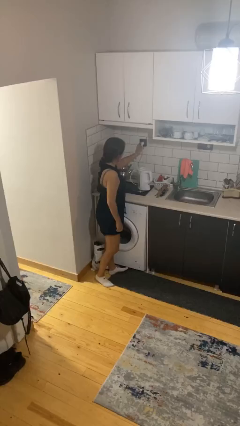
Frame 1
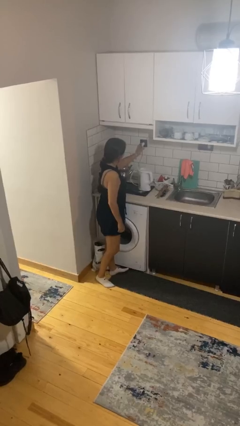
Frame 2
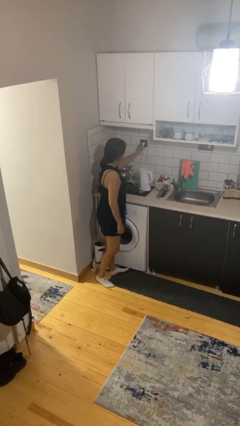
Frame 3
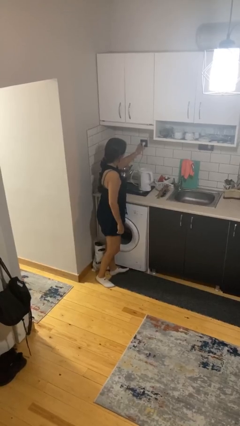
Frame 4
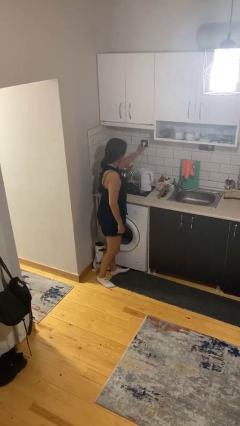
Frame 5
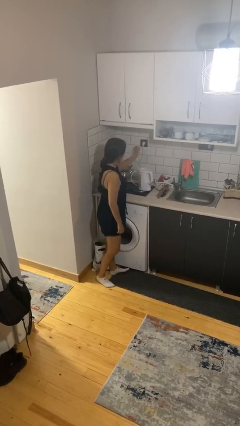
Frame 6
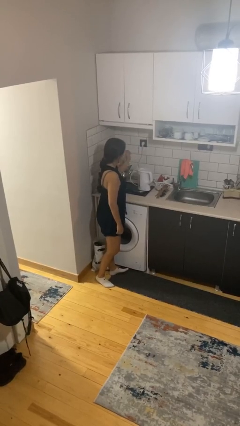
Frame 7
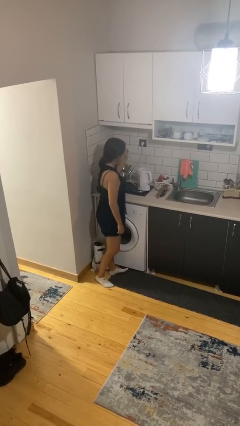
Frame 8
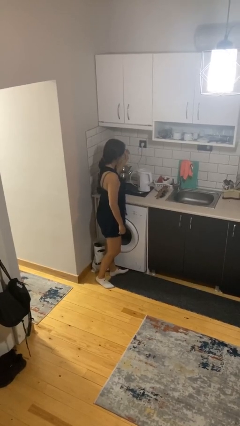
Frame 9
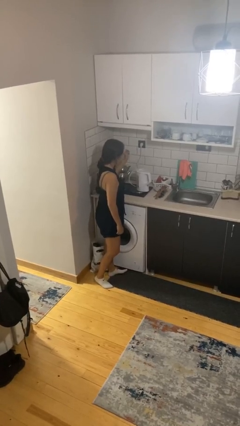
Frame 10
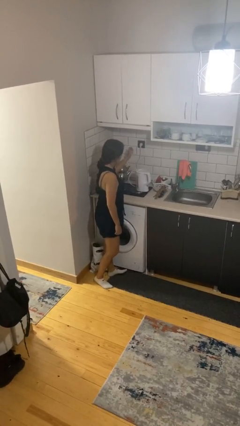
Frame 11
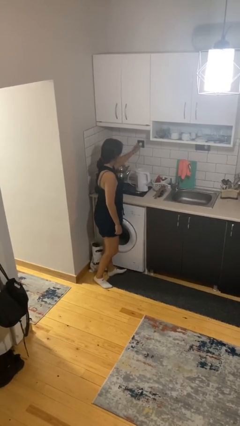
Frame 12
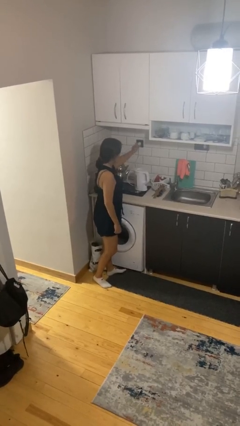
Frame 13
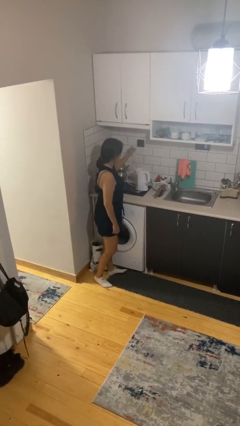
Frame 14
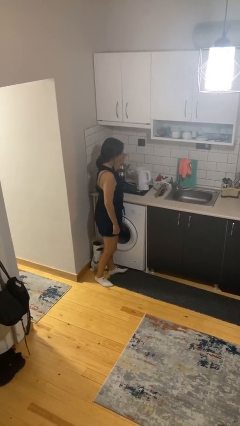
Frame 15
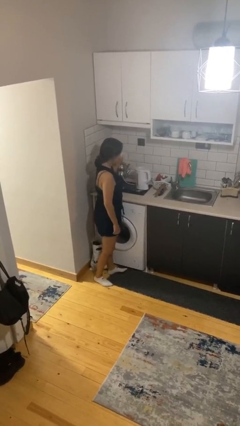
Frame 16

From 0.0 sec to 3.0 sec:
person unplugs from electrical socket

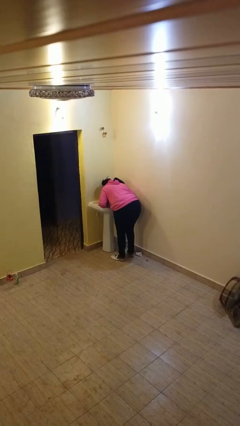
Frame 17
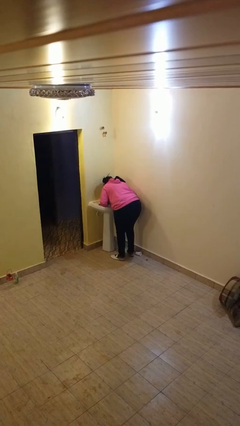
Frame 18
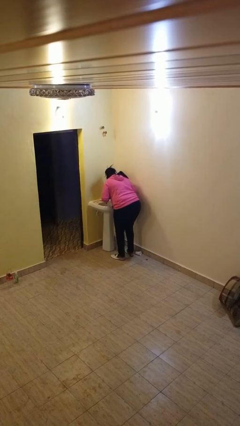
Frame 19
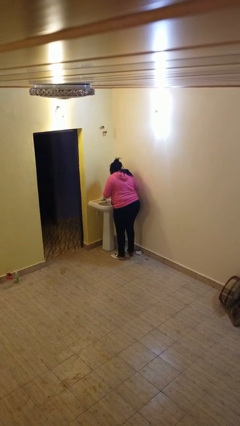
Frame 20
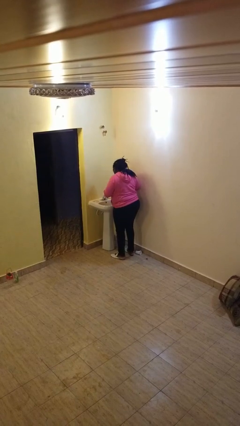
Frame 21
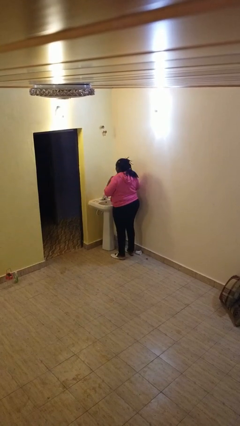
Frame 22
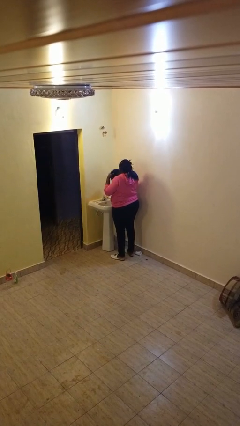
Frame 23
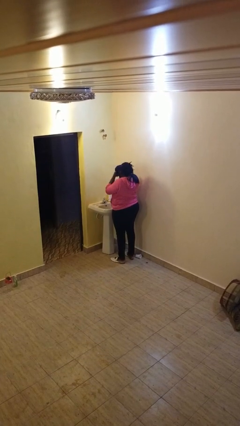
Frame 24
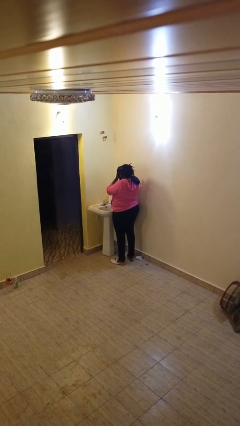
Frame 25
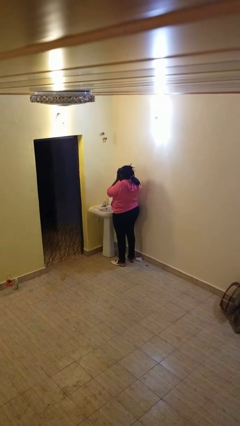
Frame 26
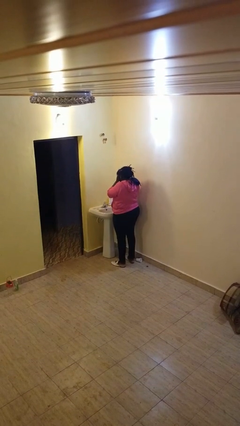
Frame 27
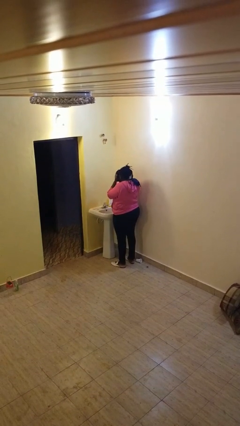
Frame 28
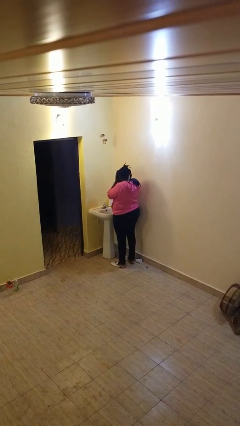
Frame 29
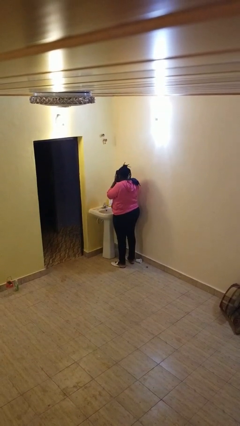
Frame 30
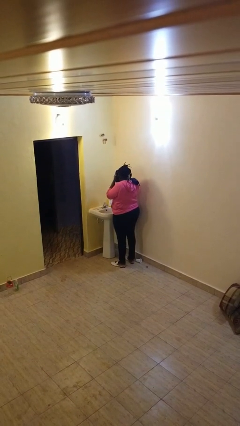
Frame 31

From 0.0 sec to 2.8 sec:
person dries face with towel

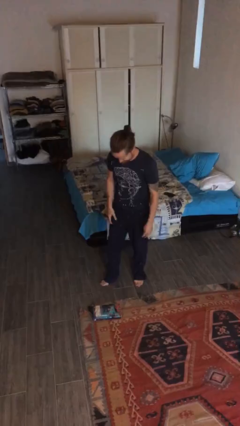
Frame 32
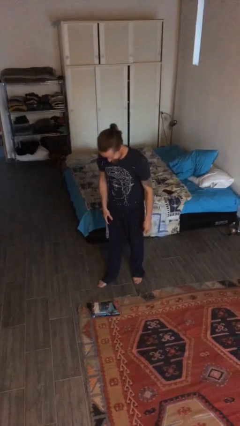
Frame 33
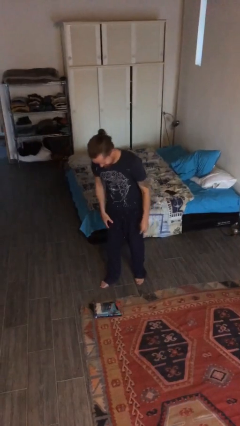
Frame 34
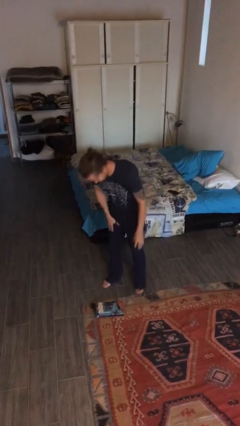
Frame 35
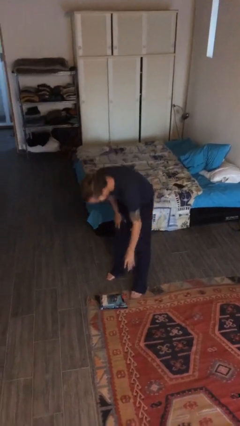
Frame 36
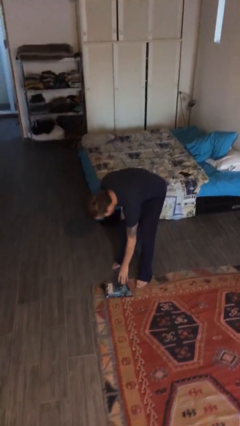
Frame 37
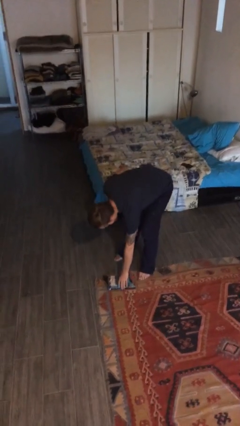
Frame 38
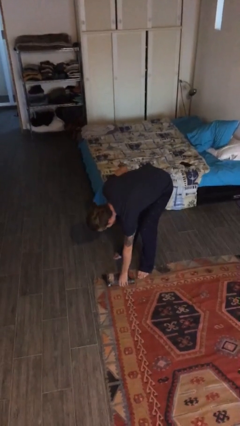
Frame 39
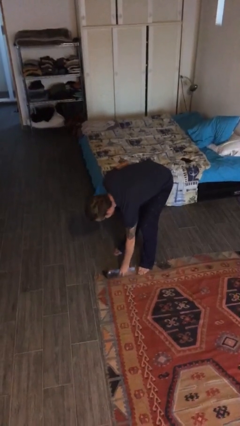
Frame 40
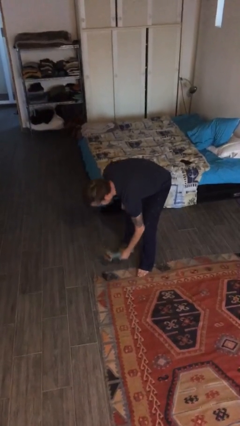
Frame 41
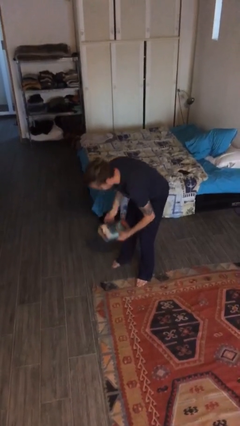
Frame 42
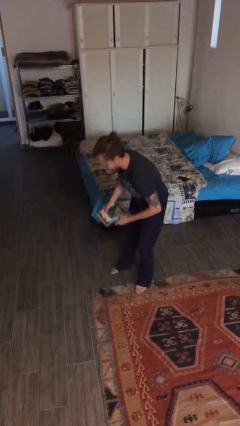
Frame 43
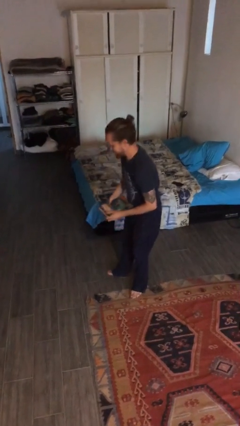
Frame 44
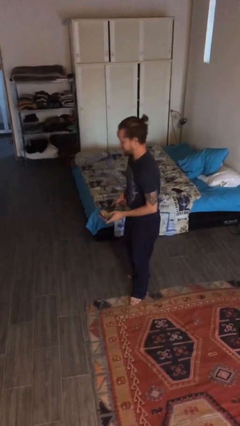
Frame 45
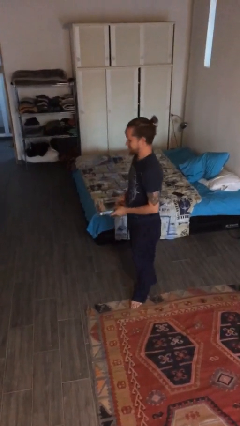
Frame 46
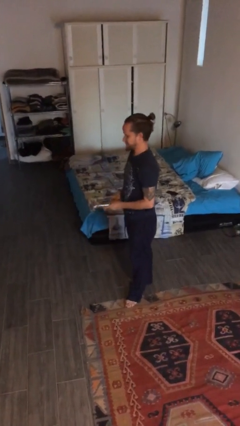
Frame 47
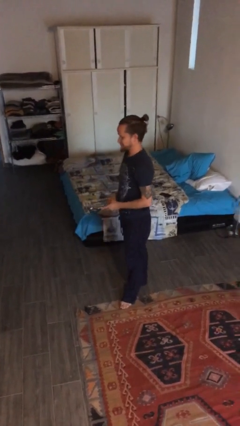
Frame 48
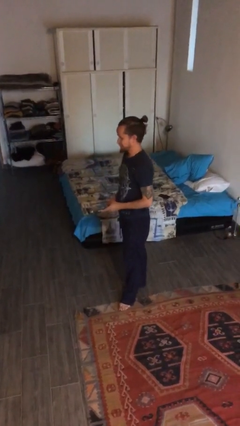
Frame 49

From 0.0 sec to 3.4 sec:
person picks up object from floor

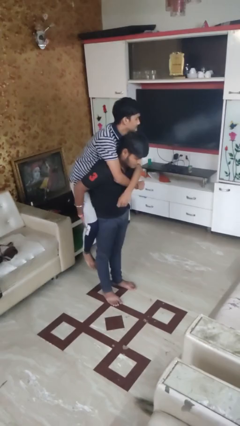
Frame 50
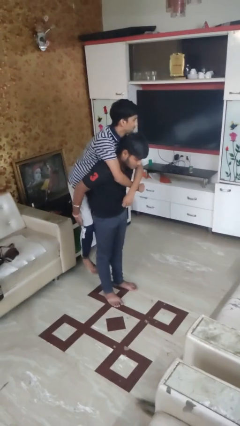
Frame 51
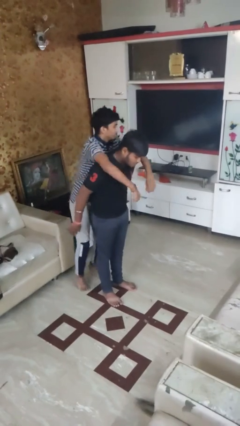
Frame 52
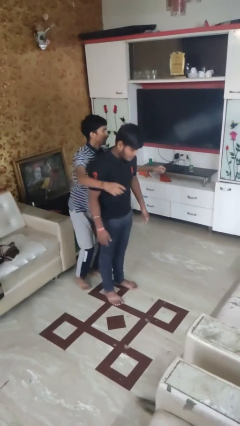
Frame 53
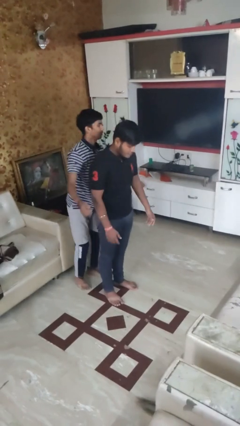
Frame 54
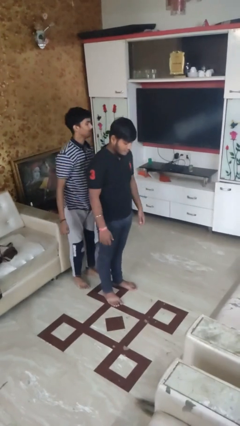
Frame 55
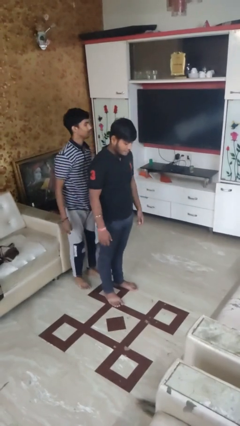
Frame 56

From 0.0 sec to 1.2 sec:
person puts down person

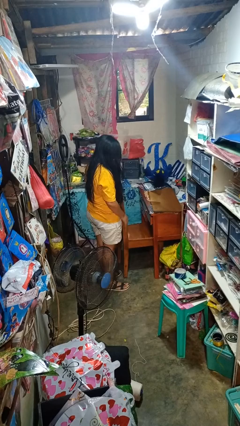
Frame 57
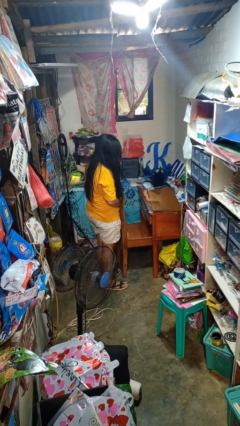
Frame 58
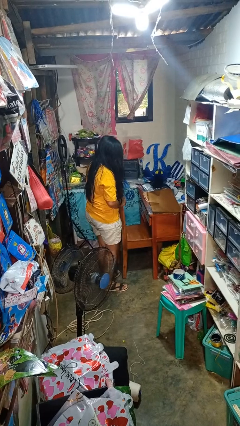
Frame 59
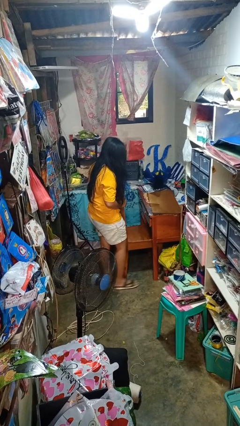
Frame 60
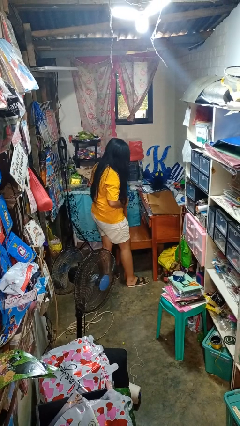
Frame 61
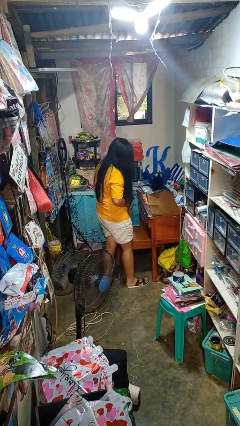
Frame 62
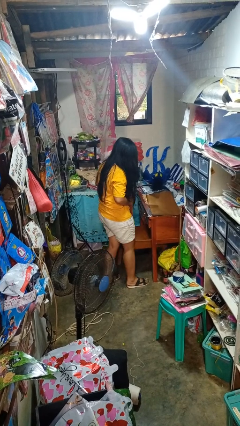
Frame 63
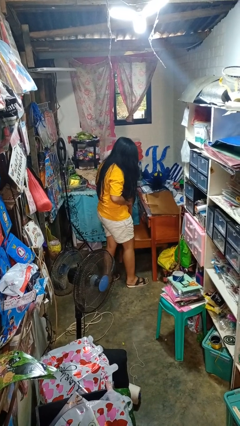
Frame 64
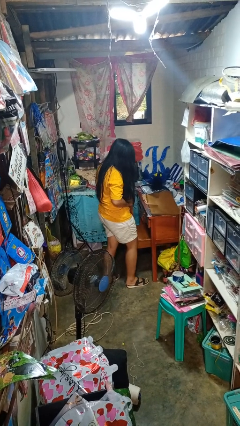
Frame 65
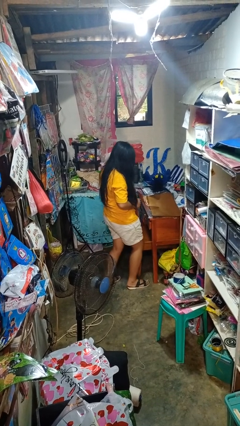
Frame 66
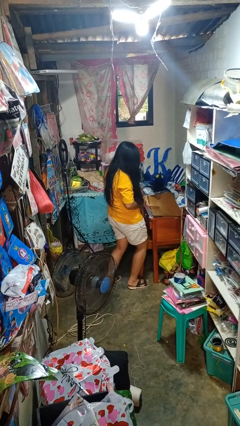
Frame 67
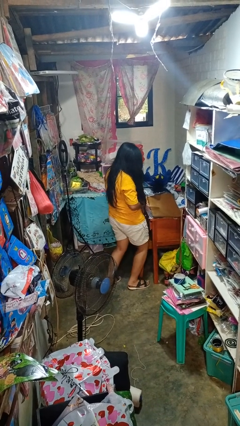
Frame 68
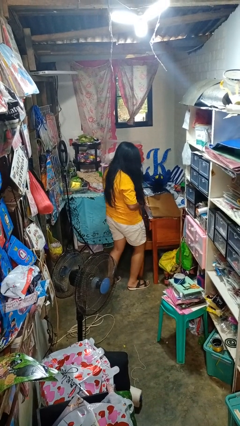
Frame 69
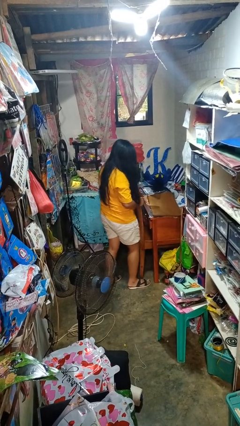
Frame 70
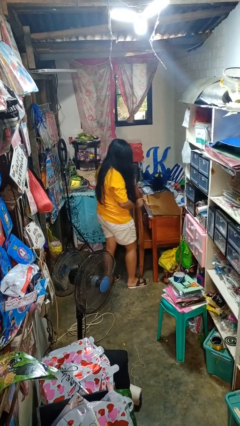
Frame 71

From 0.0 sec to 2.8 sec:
person pushes in chair

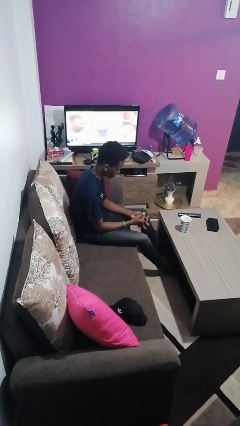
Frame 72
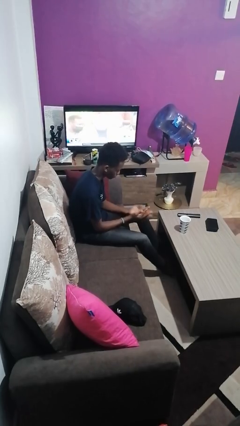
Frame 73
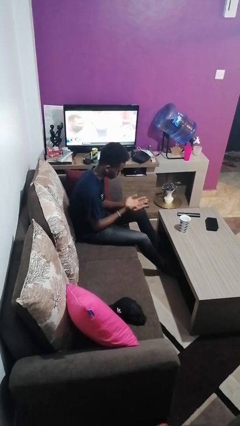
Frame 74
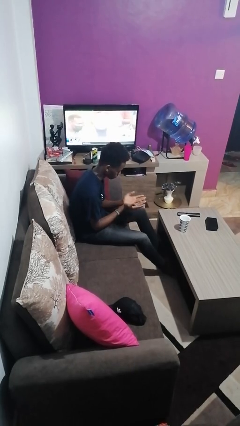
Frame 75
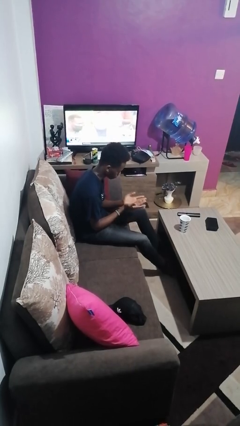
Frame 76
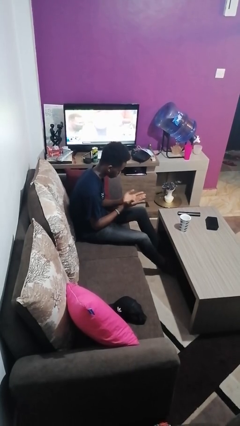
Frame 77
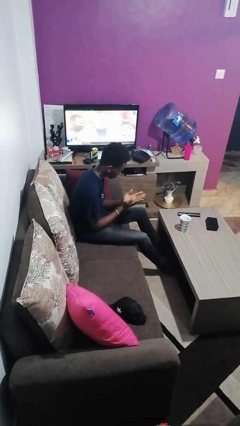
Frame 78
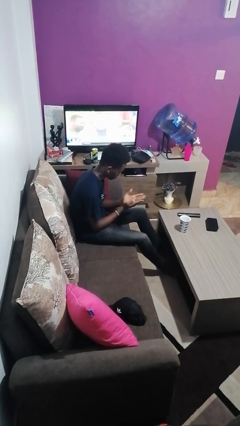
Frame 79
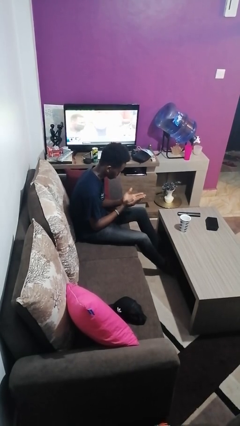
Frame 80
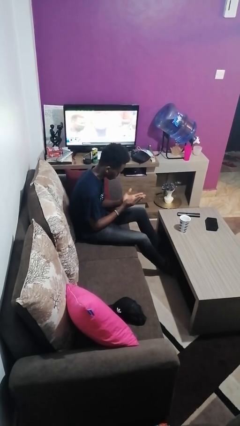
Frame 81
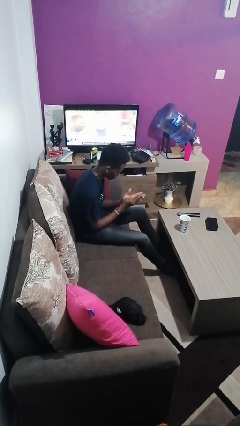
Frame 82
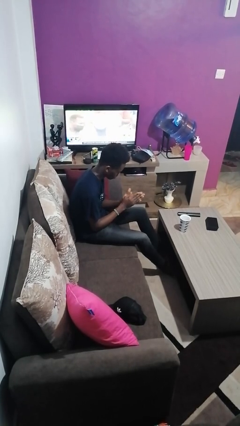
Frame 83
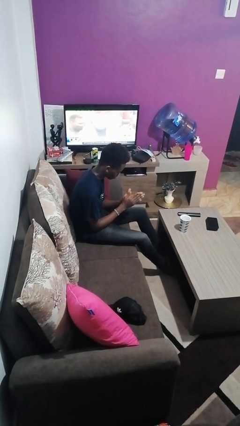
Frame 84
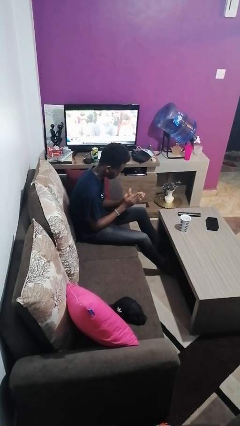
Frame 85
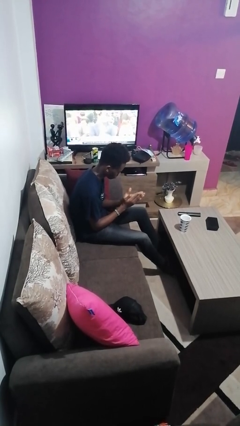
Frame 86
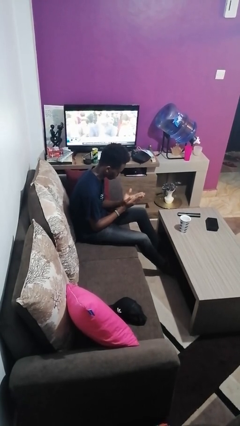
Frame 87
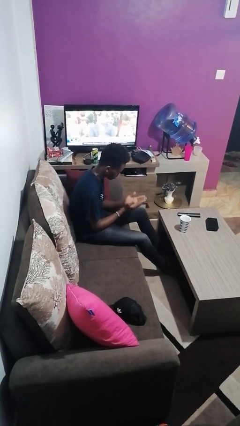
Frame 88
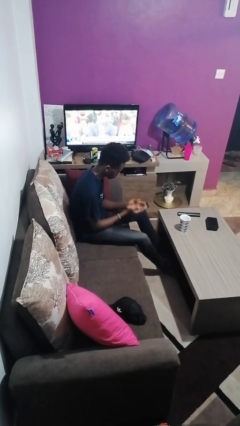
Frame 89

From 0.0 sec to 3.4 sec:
person looks at hands in lap

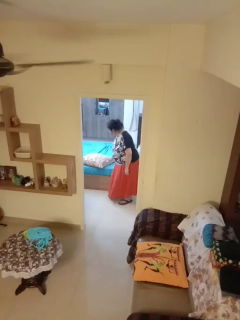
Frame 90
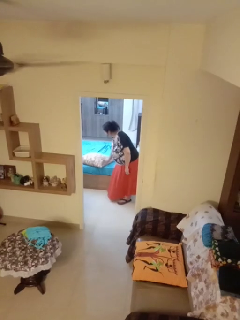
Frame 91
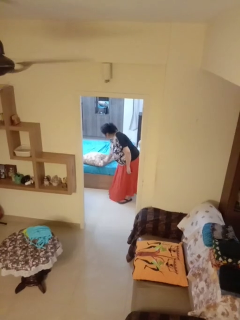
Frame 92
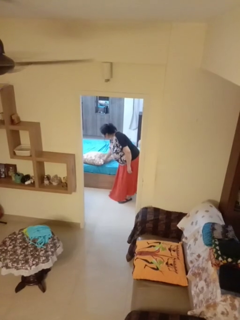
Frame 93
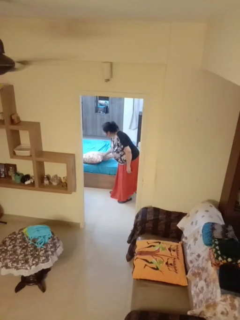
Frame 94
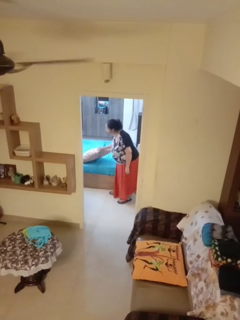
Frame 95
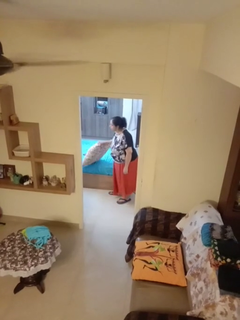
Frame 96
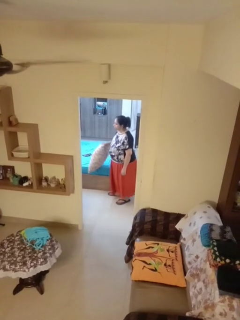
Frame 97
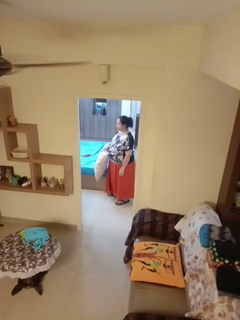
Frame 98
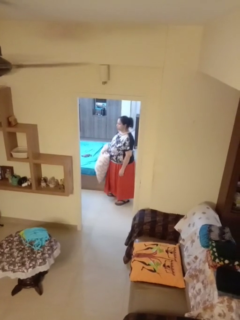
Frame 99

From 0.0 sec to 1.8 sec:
person picks up object from bed
